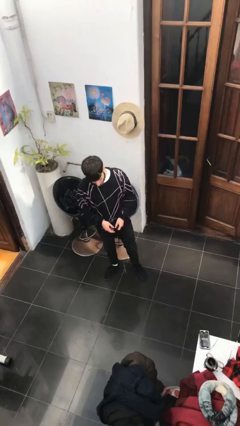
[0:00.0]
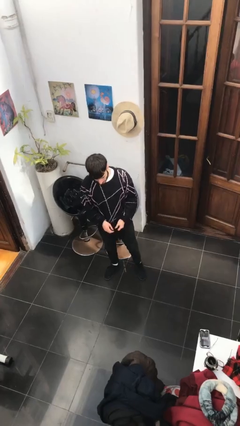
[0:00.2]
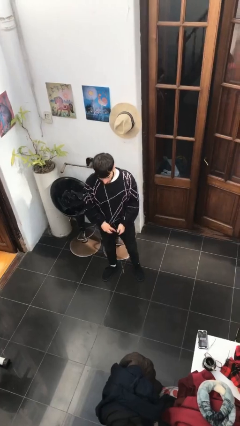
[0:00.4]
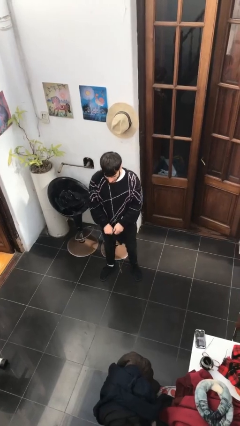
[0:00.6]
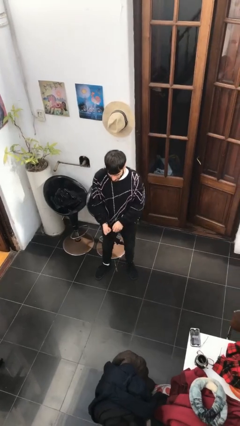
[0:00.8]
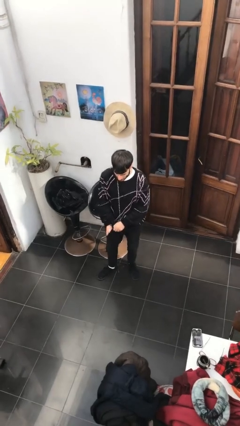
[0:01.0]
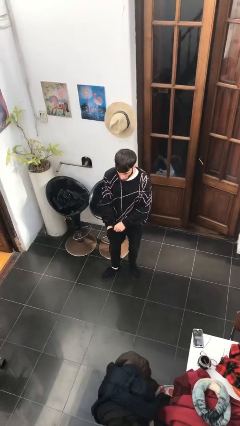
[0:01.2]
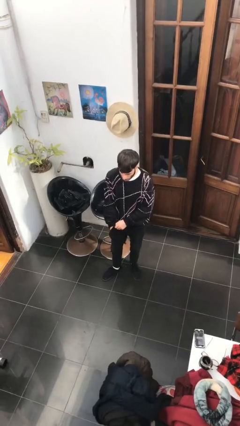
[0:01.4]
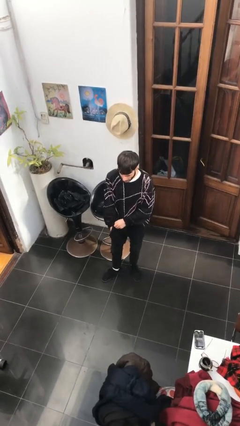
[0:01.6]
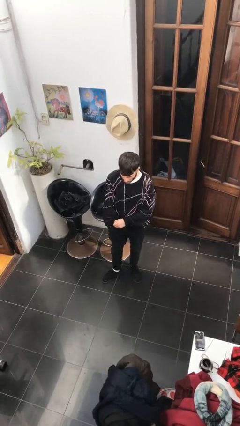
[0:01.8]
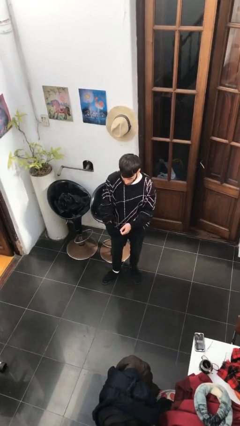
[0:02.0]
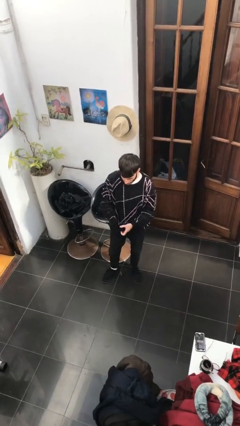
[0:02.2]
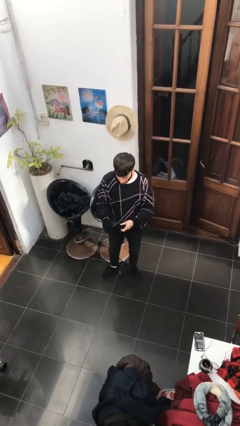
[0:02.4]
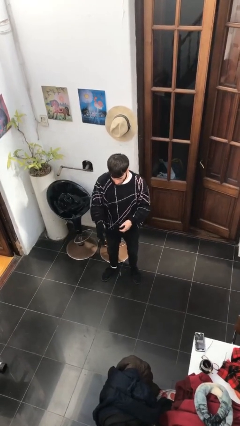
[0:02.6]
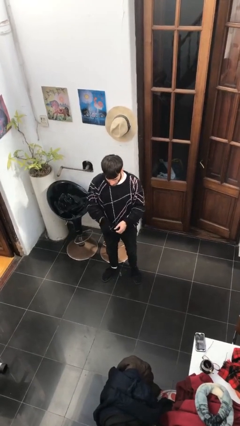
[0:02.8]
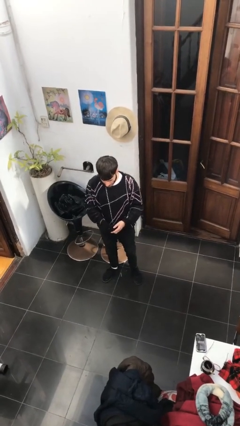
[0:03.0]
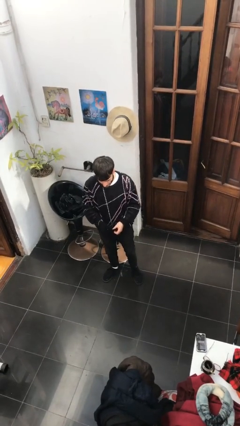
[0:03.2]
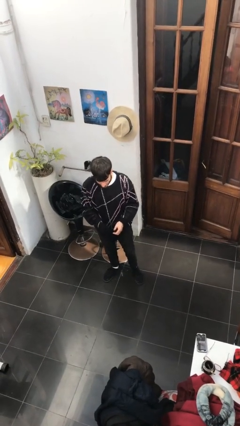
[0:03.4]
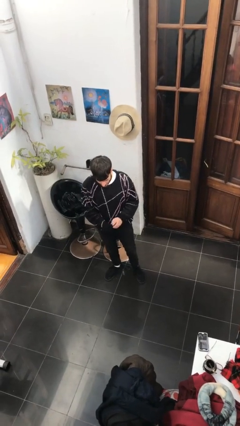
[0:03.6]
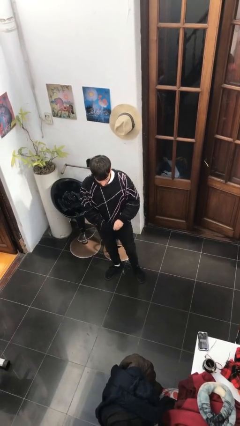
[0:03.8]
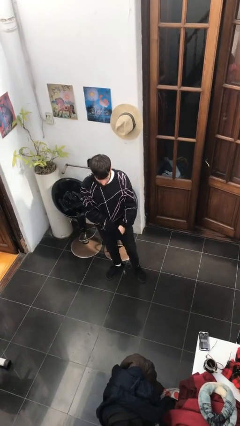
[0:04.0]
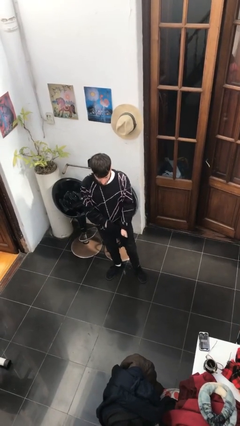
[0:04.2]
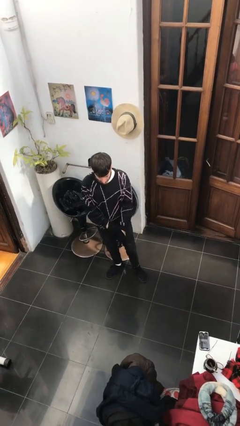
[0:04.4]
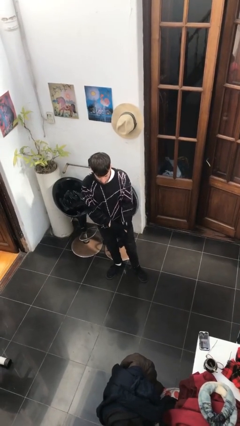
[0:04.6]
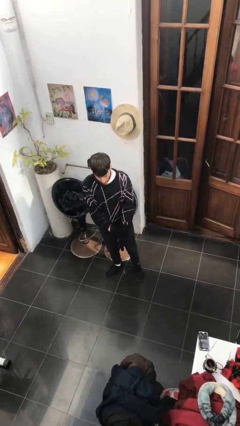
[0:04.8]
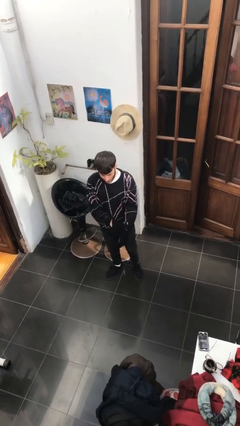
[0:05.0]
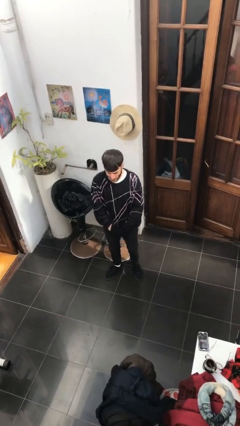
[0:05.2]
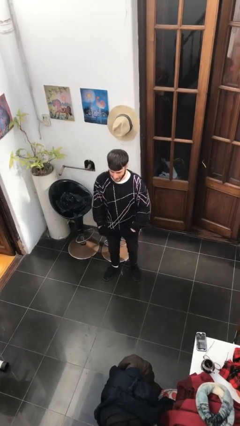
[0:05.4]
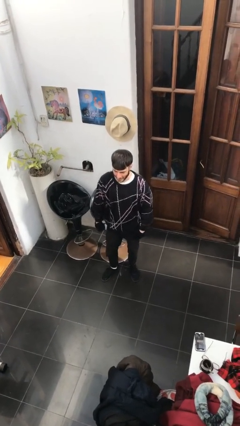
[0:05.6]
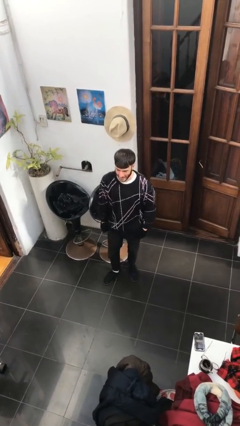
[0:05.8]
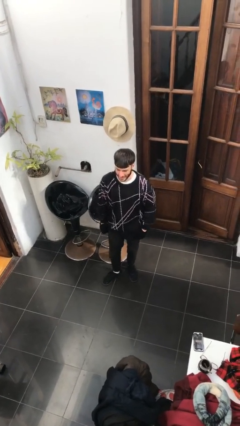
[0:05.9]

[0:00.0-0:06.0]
person puts on gloves

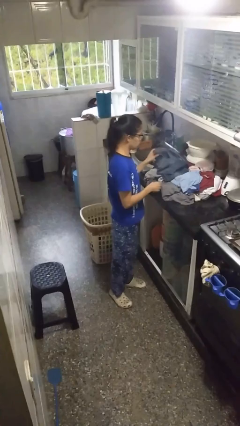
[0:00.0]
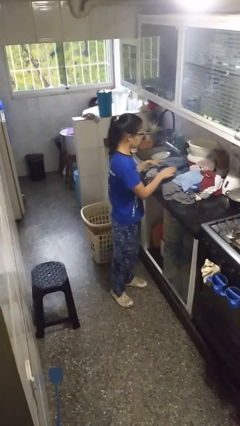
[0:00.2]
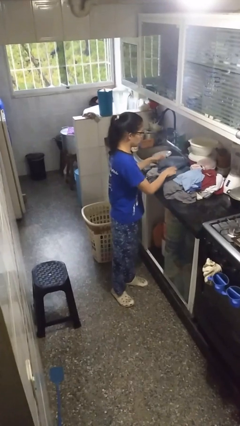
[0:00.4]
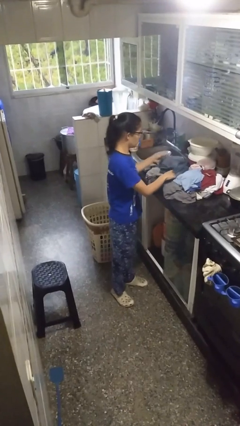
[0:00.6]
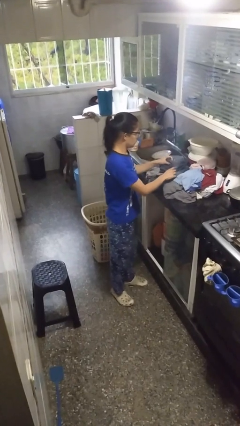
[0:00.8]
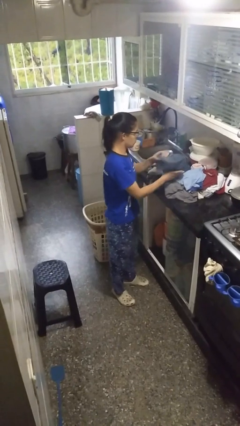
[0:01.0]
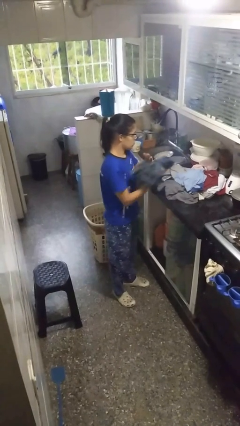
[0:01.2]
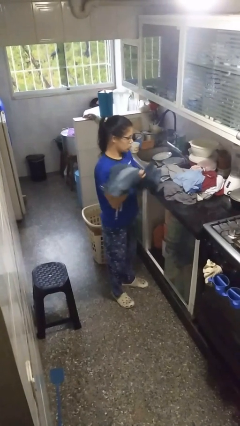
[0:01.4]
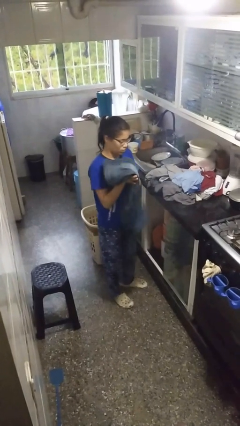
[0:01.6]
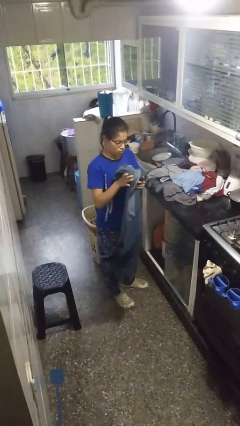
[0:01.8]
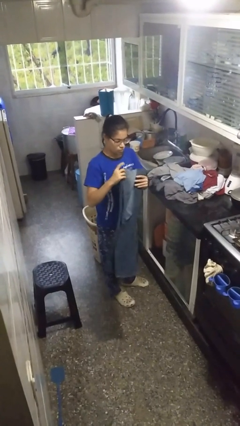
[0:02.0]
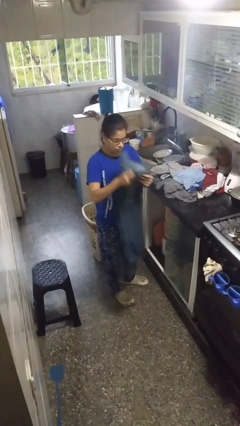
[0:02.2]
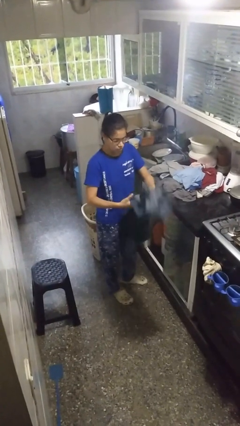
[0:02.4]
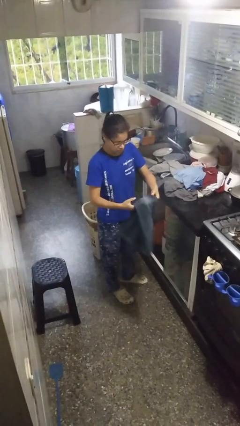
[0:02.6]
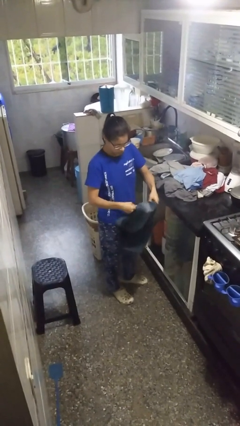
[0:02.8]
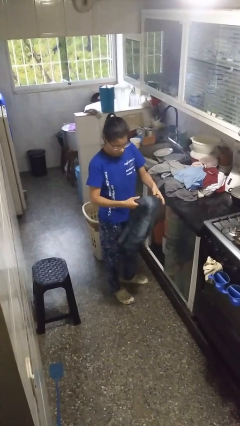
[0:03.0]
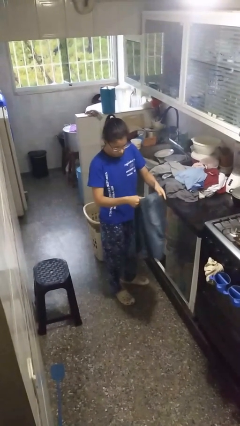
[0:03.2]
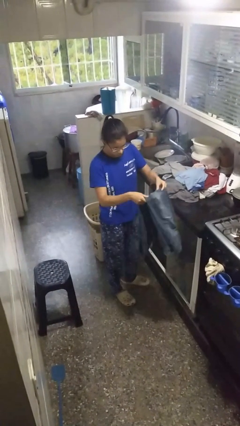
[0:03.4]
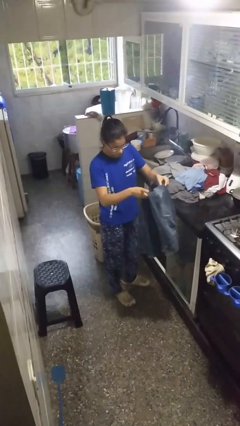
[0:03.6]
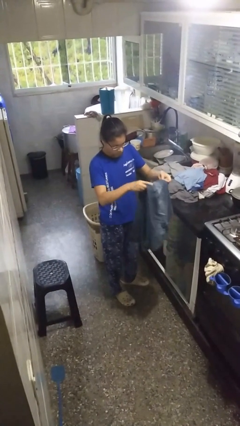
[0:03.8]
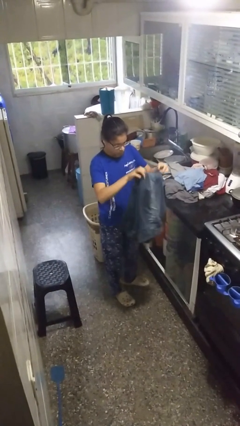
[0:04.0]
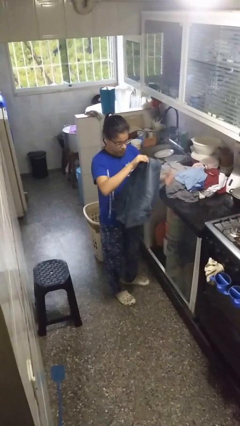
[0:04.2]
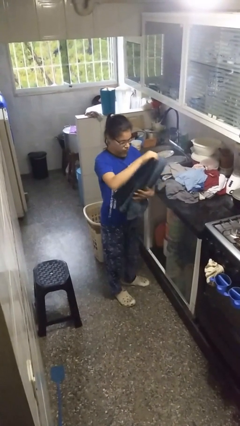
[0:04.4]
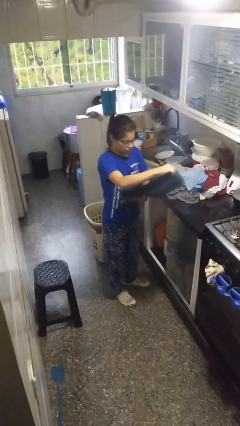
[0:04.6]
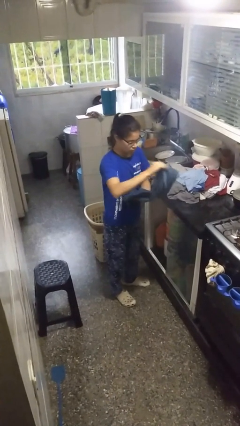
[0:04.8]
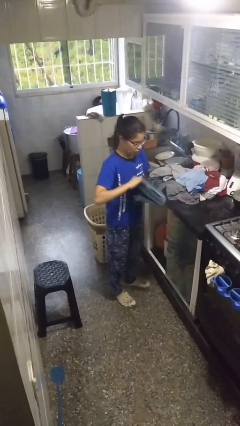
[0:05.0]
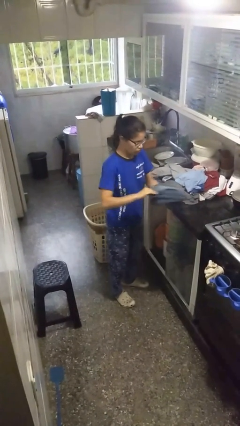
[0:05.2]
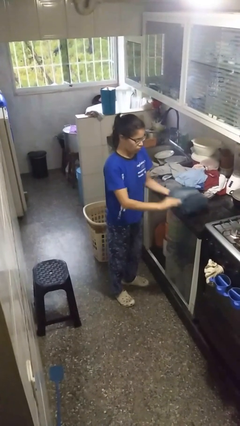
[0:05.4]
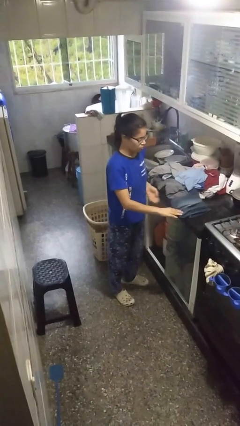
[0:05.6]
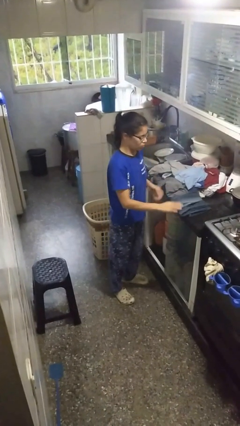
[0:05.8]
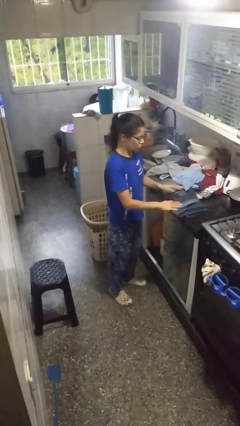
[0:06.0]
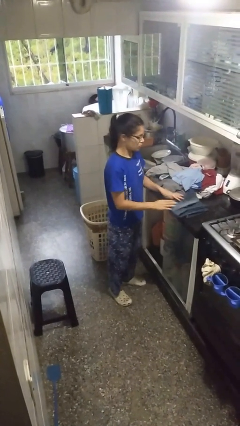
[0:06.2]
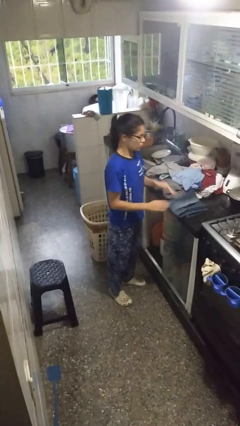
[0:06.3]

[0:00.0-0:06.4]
person folds pants

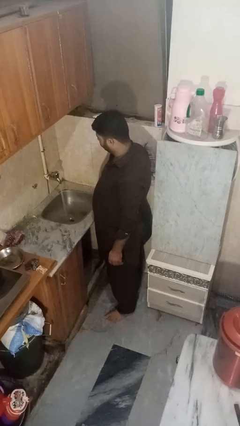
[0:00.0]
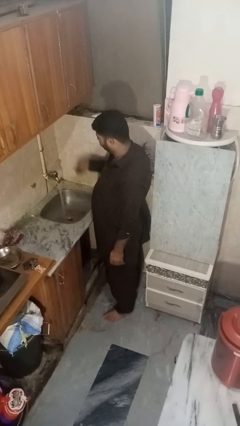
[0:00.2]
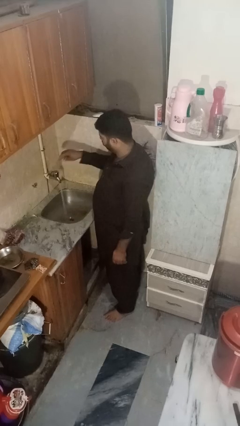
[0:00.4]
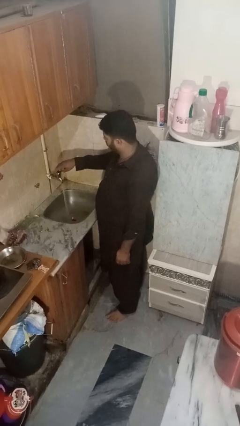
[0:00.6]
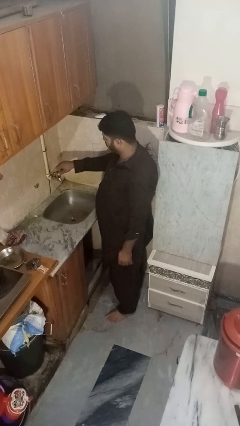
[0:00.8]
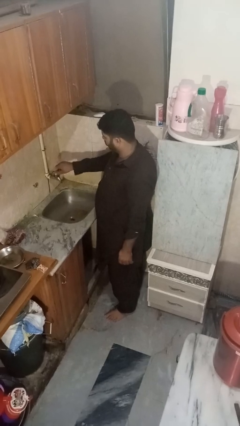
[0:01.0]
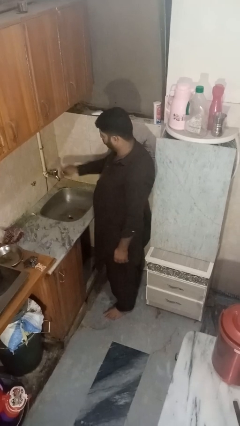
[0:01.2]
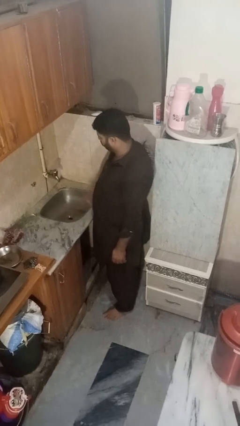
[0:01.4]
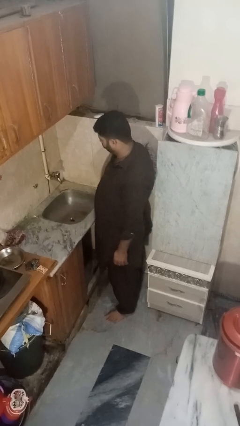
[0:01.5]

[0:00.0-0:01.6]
person turns off faucet

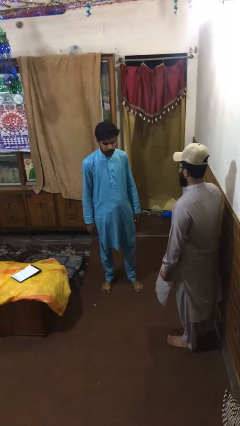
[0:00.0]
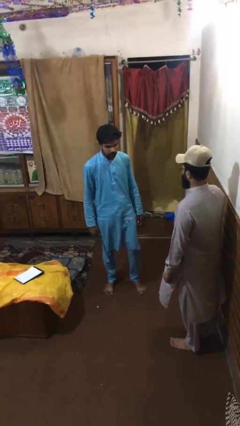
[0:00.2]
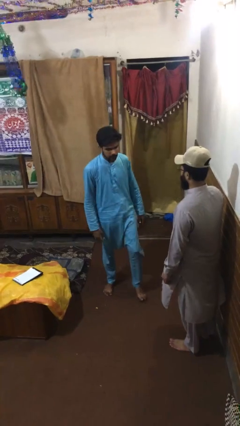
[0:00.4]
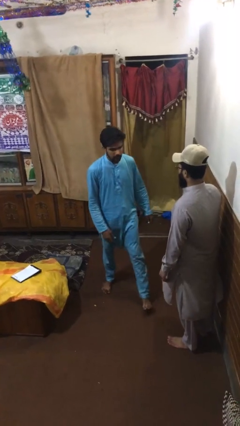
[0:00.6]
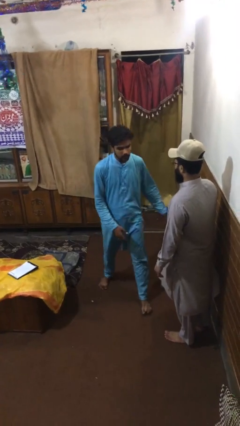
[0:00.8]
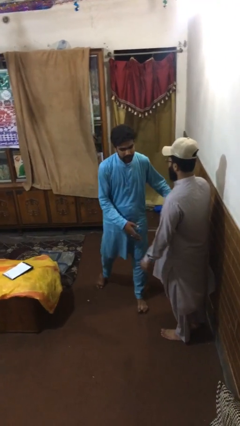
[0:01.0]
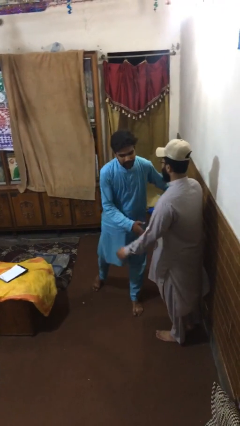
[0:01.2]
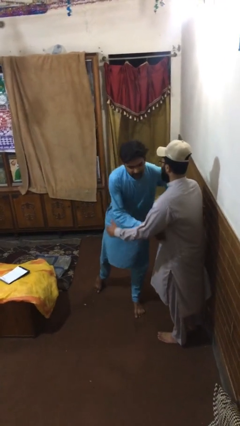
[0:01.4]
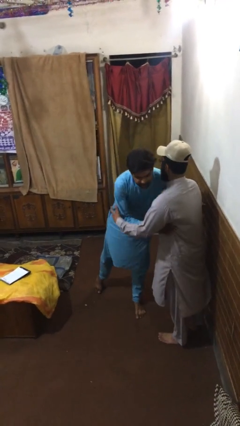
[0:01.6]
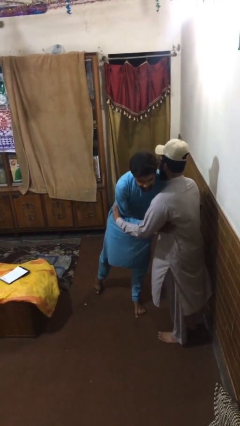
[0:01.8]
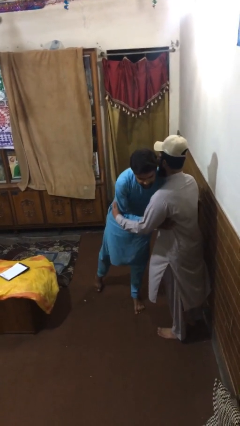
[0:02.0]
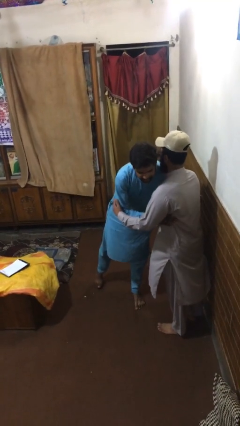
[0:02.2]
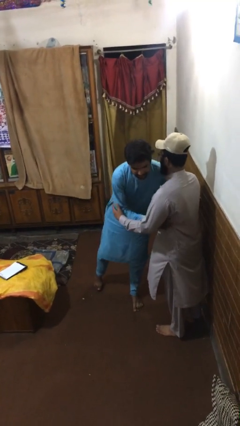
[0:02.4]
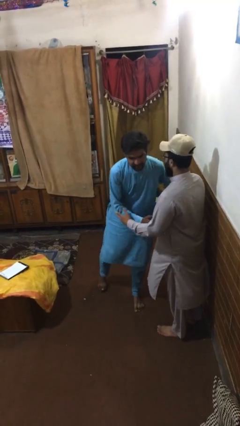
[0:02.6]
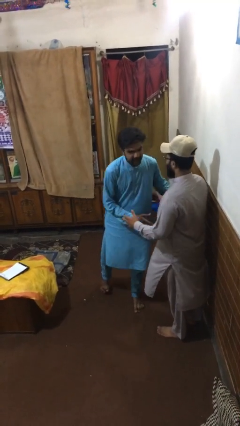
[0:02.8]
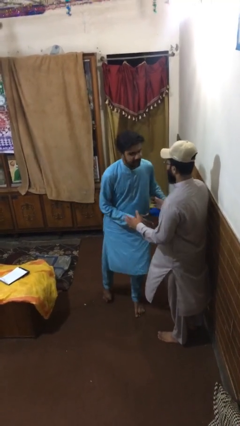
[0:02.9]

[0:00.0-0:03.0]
person embraces person

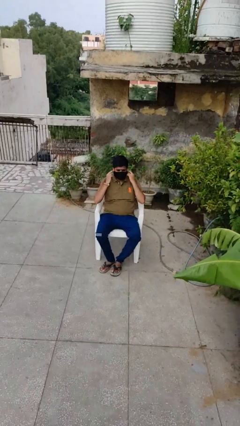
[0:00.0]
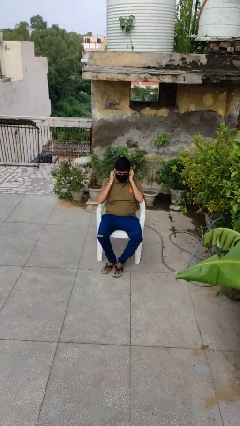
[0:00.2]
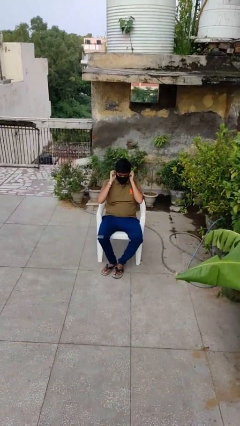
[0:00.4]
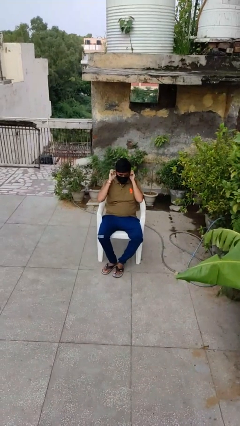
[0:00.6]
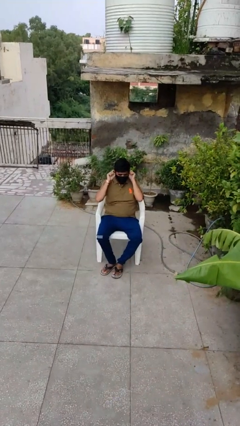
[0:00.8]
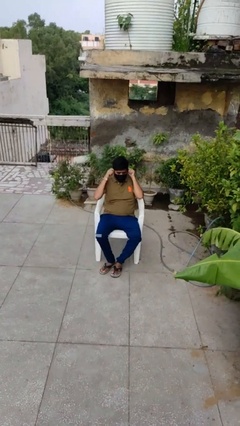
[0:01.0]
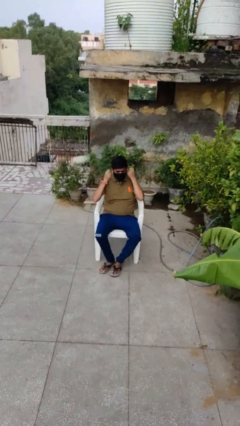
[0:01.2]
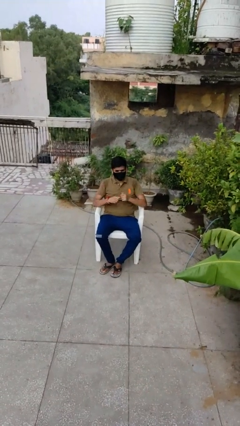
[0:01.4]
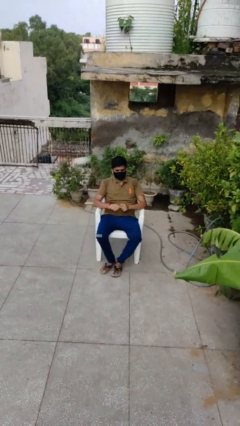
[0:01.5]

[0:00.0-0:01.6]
person puts on facemask
